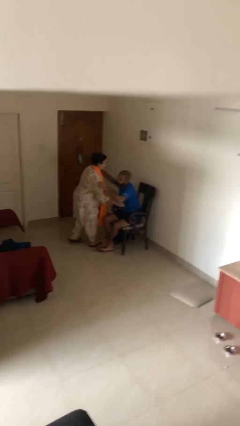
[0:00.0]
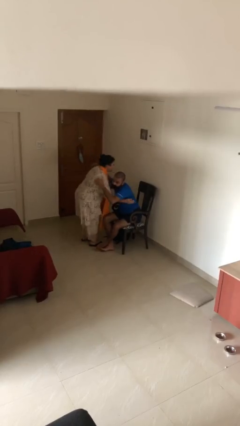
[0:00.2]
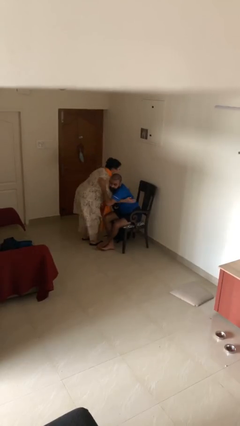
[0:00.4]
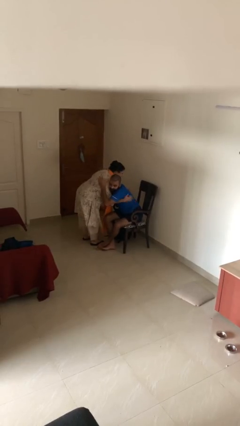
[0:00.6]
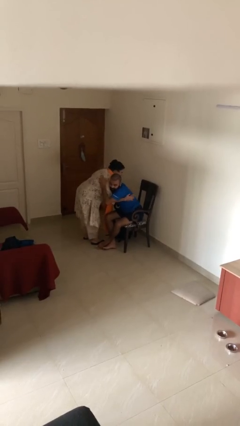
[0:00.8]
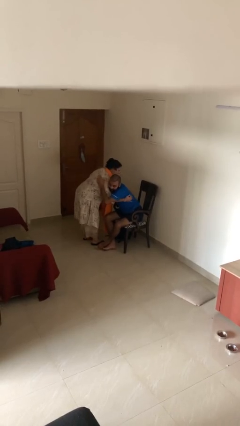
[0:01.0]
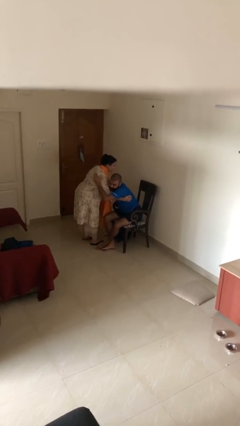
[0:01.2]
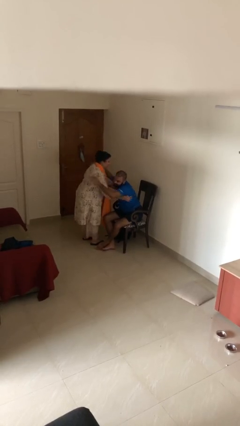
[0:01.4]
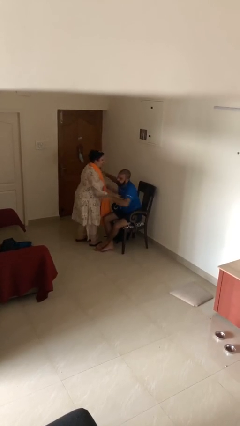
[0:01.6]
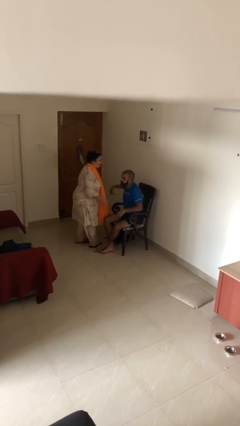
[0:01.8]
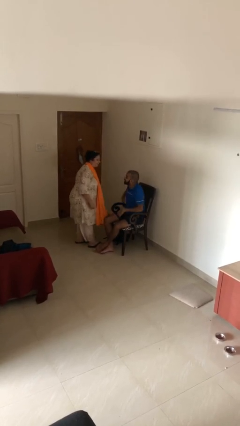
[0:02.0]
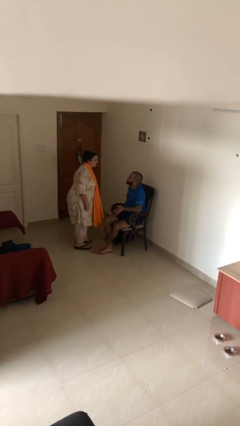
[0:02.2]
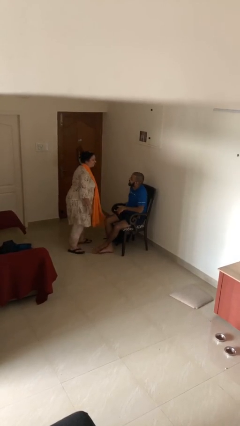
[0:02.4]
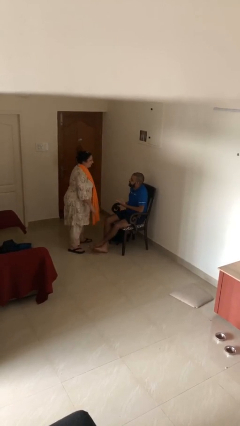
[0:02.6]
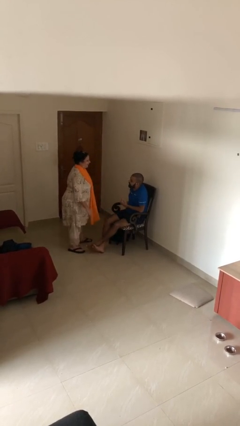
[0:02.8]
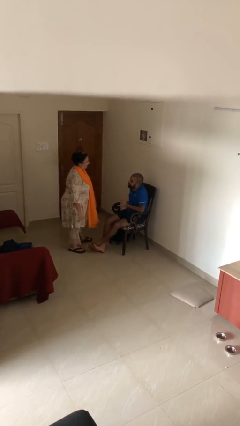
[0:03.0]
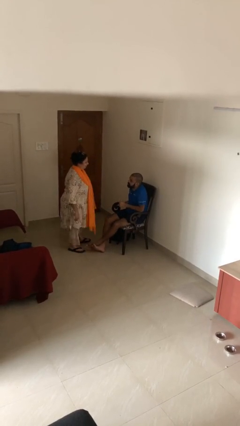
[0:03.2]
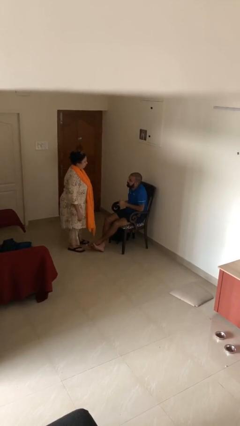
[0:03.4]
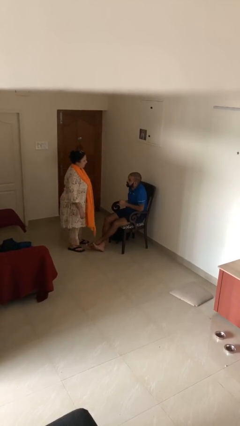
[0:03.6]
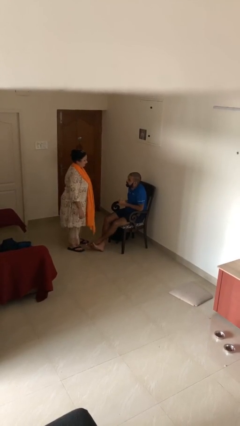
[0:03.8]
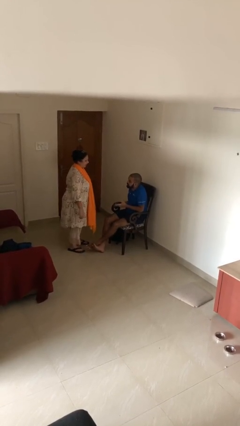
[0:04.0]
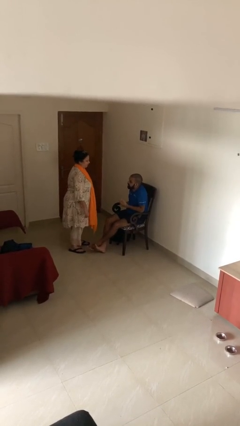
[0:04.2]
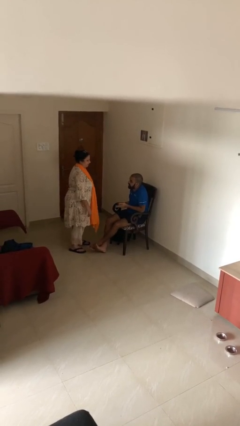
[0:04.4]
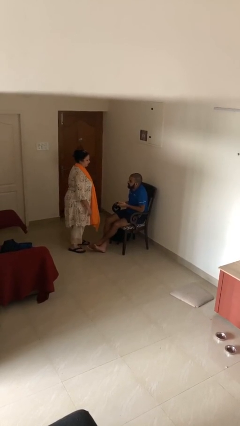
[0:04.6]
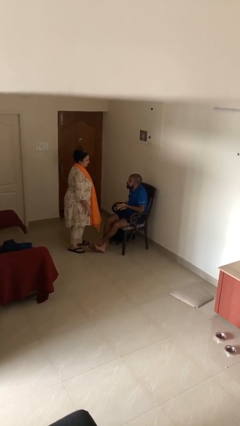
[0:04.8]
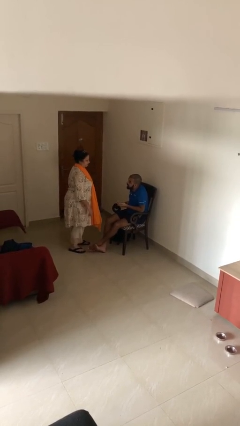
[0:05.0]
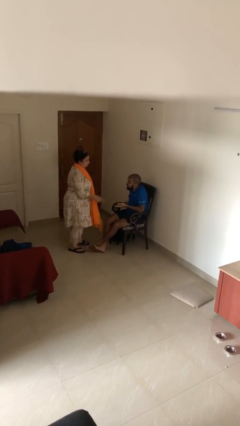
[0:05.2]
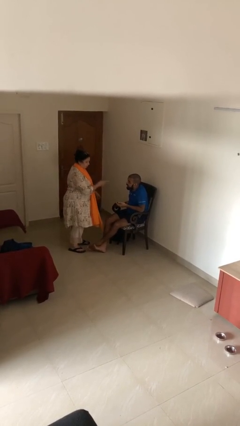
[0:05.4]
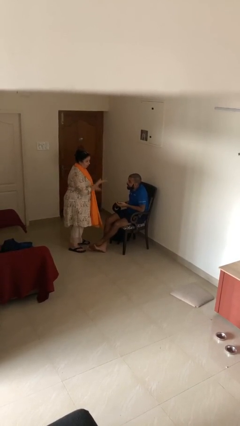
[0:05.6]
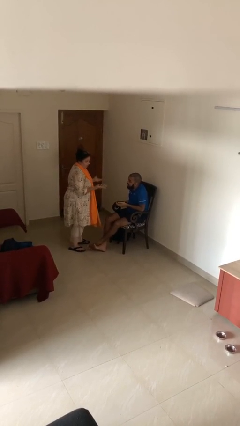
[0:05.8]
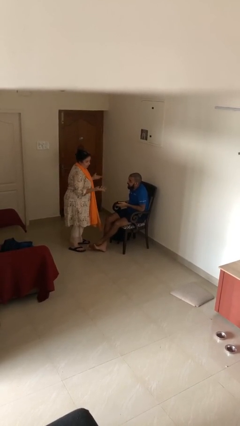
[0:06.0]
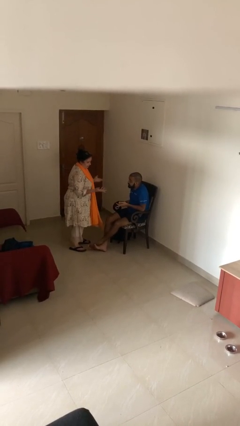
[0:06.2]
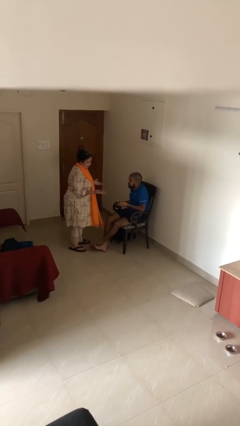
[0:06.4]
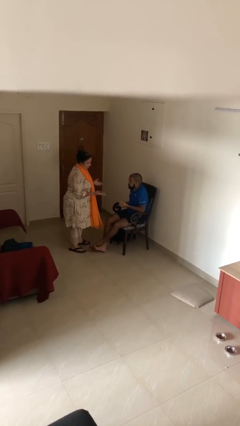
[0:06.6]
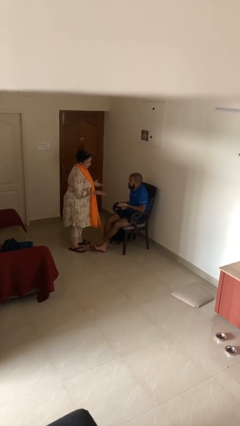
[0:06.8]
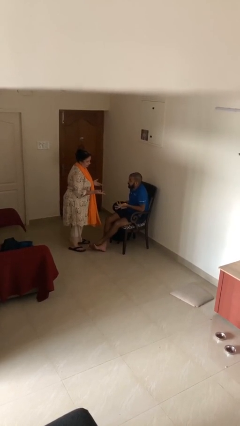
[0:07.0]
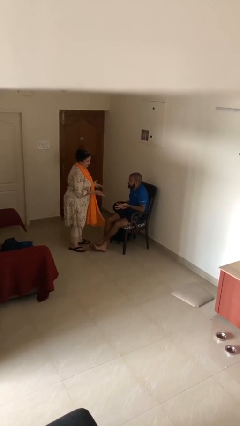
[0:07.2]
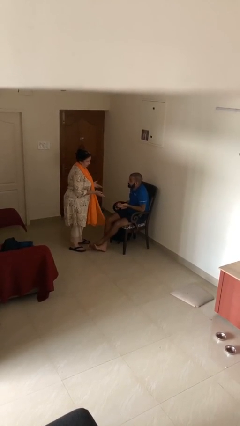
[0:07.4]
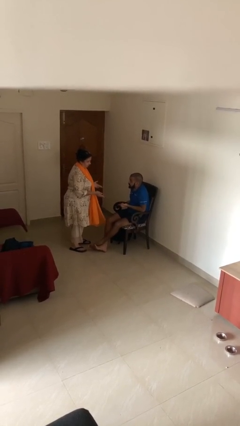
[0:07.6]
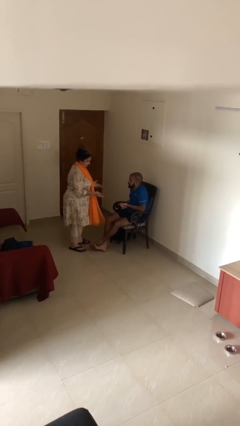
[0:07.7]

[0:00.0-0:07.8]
person embraces person

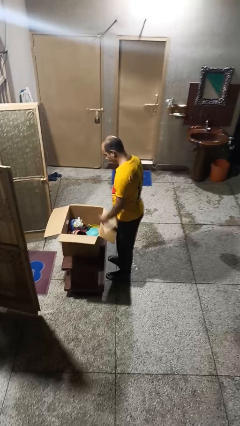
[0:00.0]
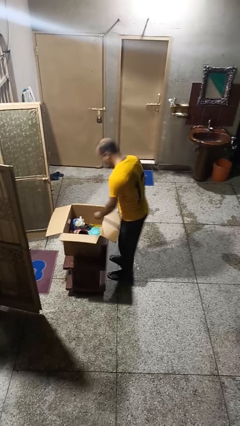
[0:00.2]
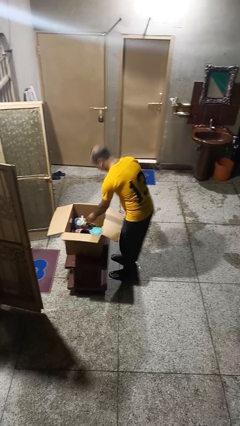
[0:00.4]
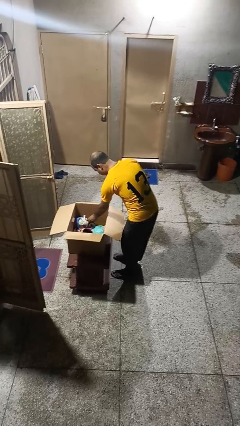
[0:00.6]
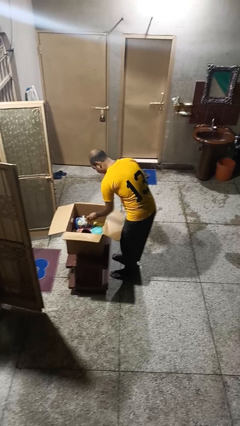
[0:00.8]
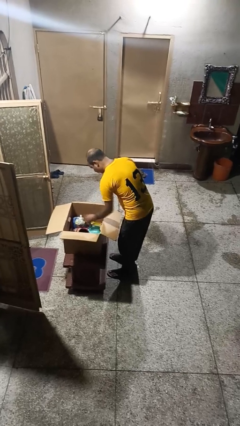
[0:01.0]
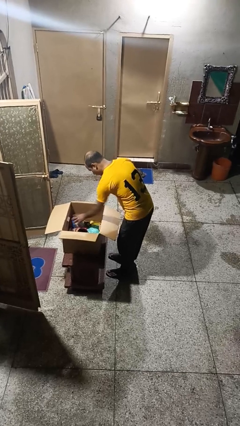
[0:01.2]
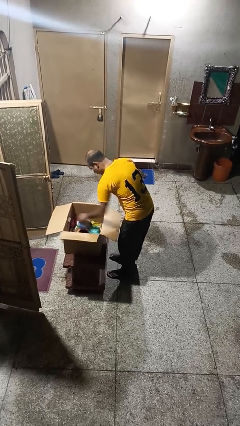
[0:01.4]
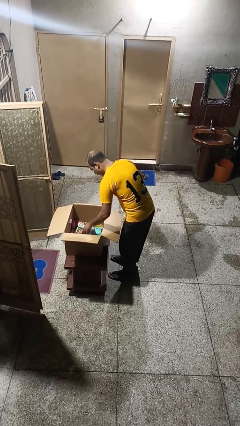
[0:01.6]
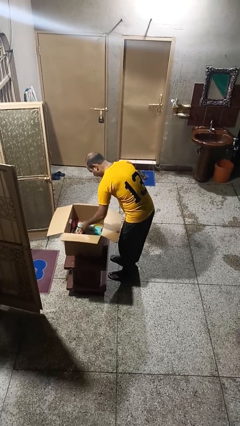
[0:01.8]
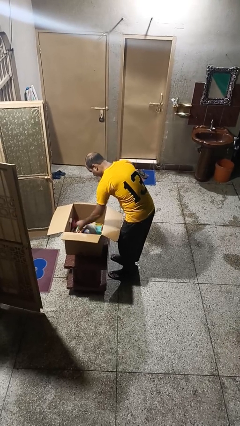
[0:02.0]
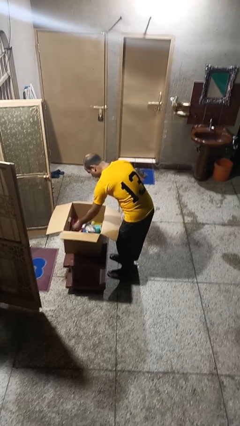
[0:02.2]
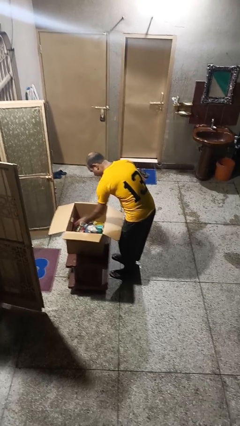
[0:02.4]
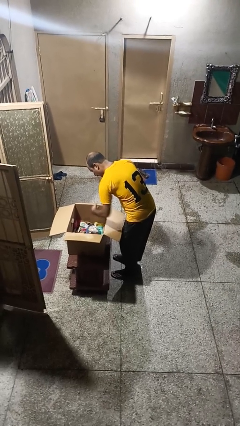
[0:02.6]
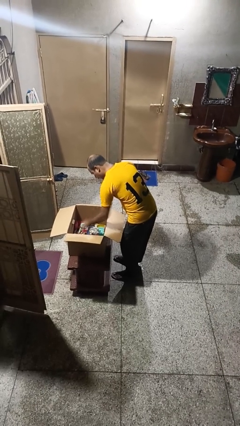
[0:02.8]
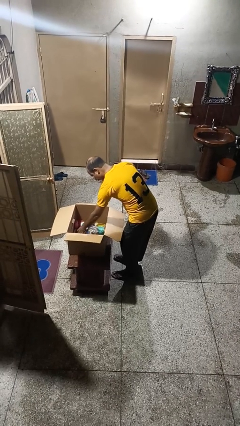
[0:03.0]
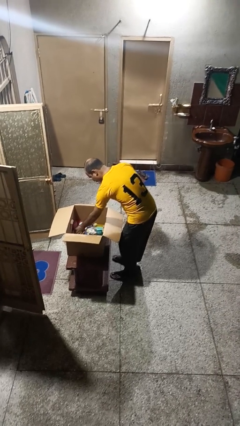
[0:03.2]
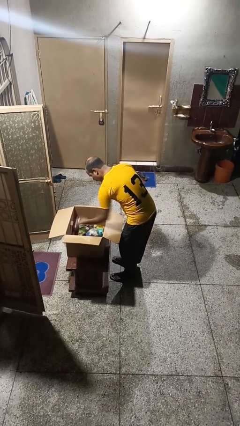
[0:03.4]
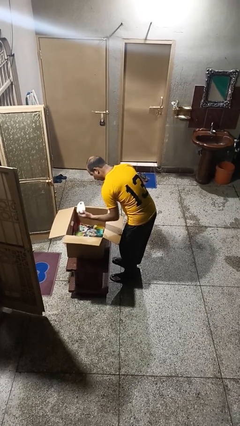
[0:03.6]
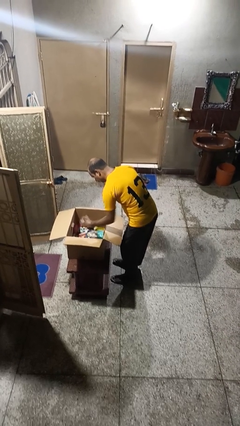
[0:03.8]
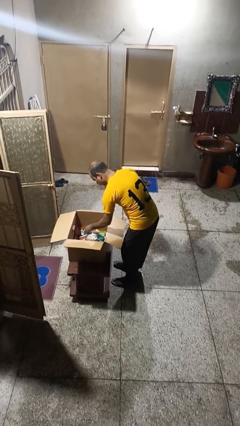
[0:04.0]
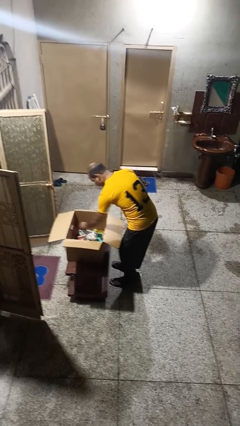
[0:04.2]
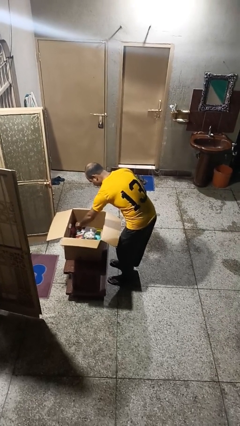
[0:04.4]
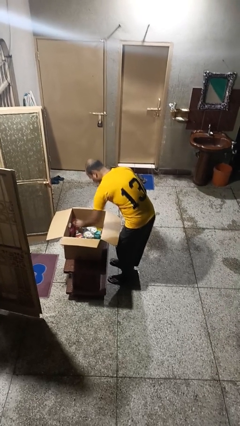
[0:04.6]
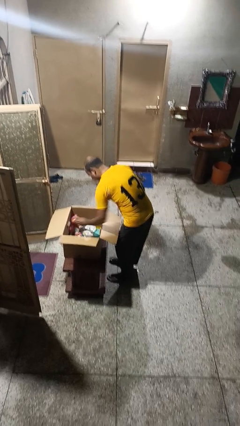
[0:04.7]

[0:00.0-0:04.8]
person searches in box

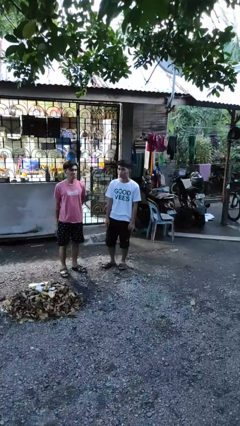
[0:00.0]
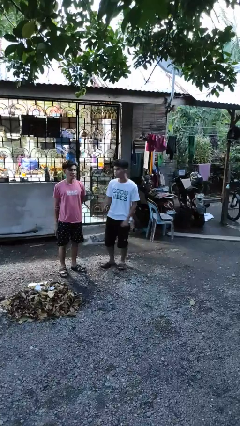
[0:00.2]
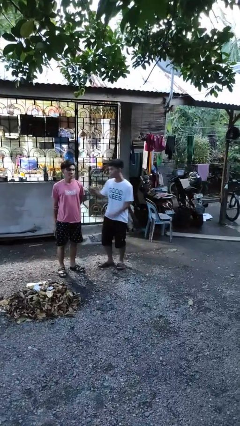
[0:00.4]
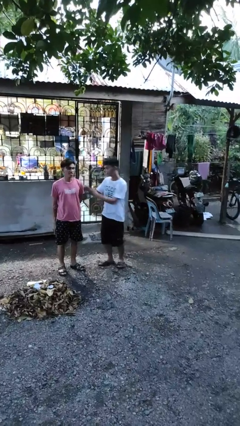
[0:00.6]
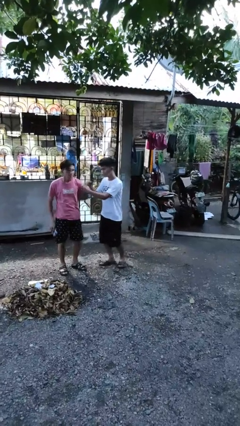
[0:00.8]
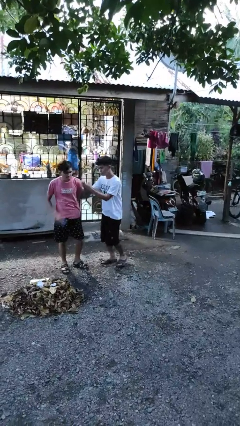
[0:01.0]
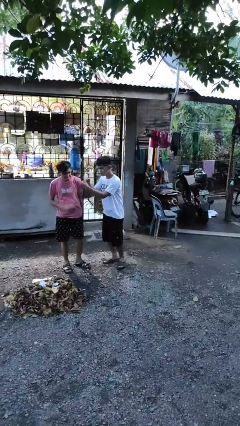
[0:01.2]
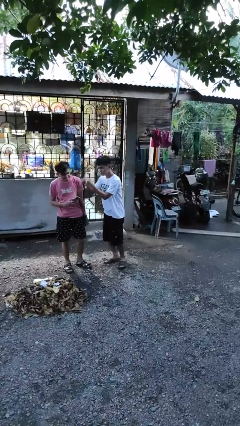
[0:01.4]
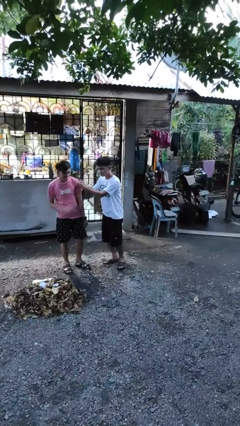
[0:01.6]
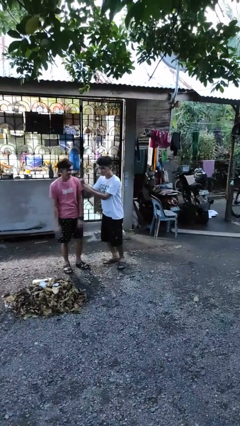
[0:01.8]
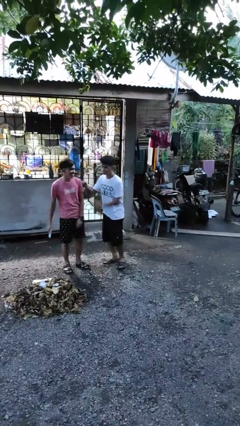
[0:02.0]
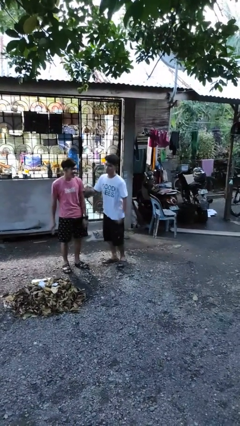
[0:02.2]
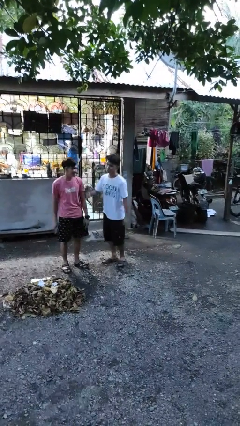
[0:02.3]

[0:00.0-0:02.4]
person pounds shoulders of person

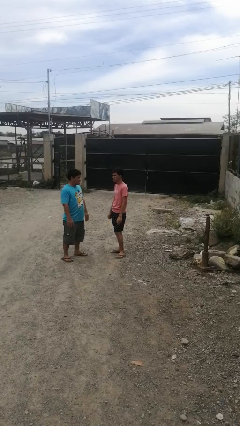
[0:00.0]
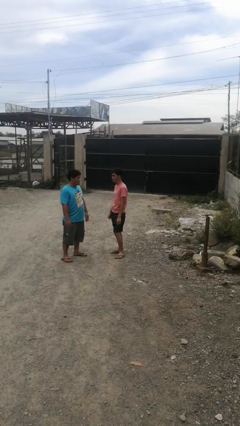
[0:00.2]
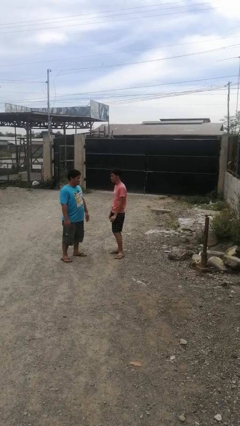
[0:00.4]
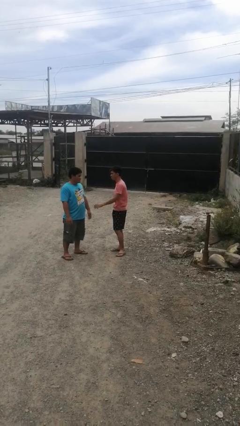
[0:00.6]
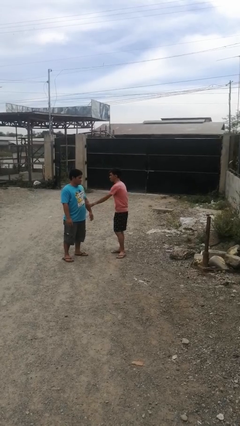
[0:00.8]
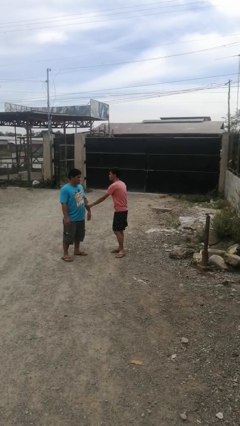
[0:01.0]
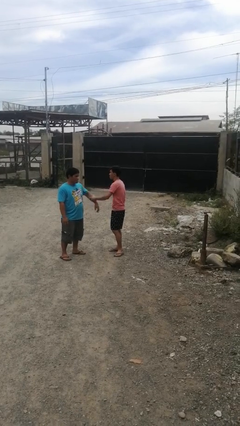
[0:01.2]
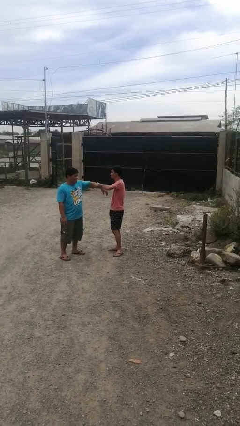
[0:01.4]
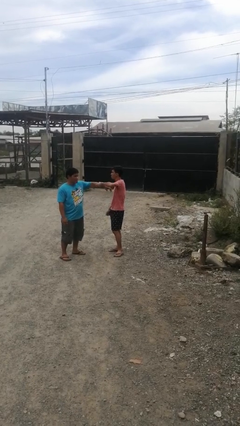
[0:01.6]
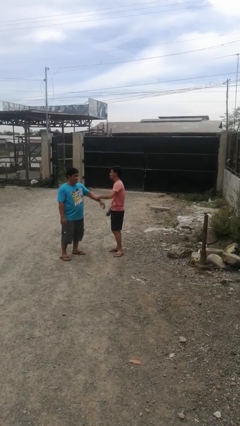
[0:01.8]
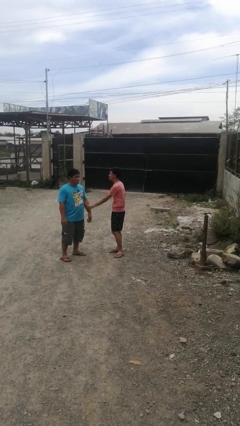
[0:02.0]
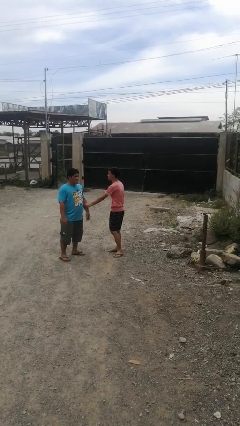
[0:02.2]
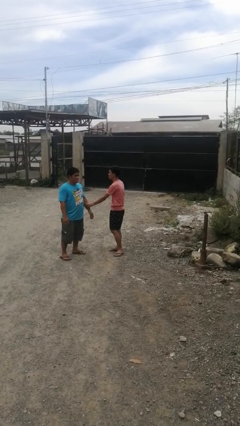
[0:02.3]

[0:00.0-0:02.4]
person grabs person by forearm
